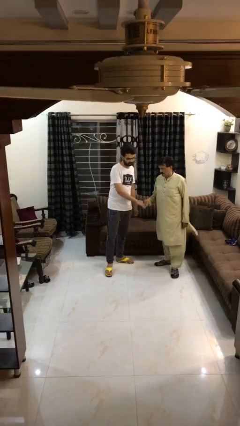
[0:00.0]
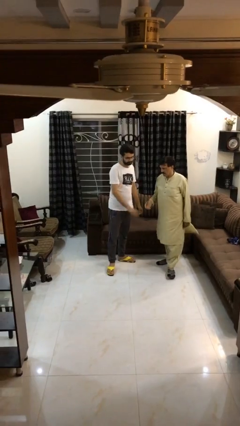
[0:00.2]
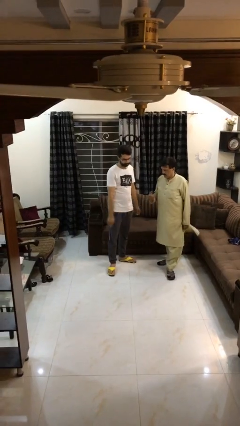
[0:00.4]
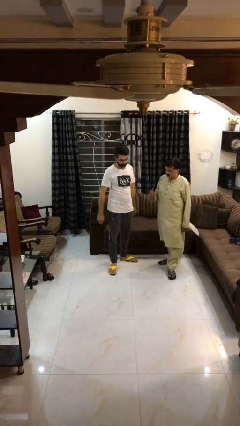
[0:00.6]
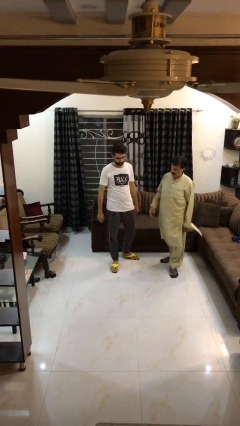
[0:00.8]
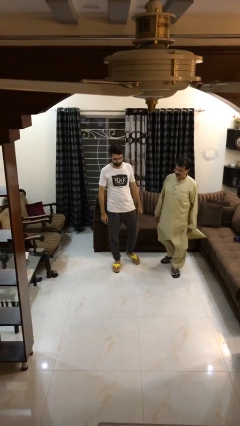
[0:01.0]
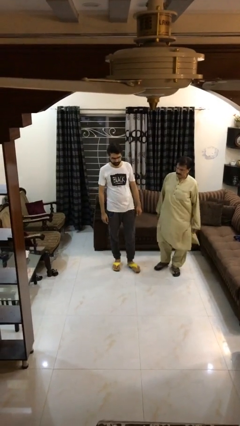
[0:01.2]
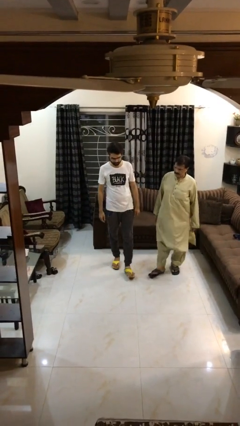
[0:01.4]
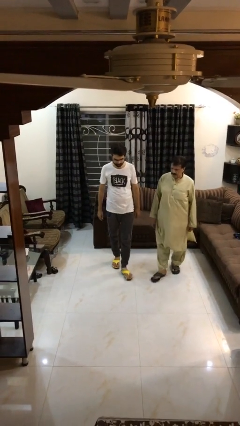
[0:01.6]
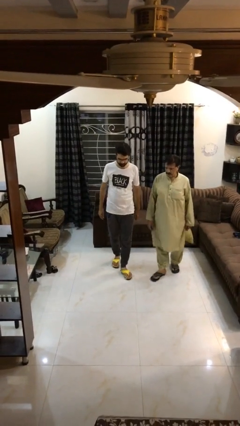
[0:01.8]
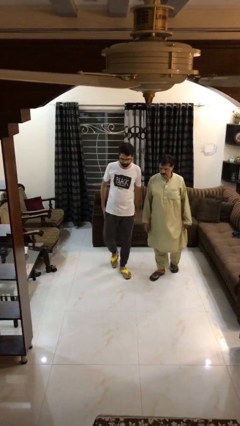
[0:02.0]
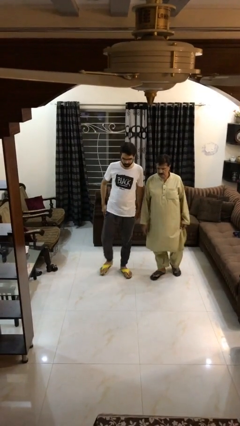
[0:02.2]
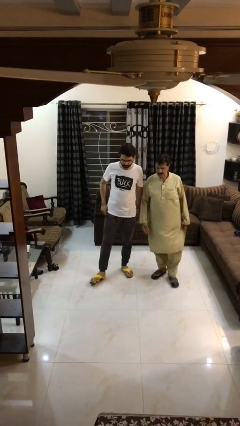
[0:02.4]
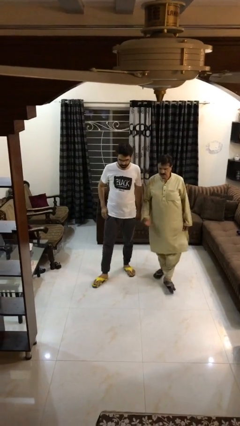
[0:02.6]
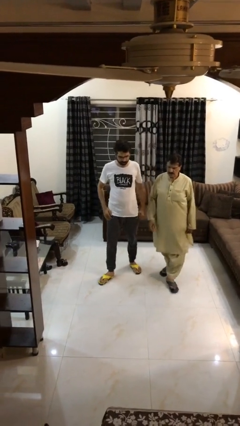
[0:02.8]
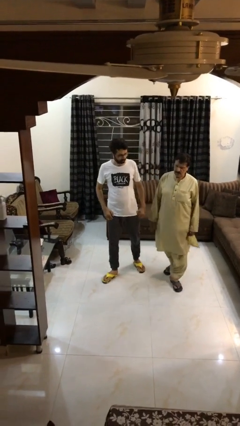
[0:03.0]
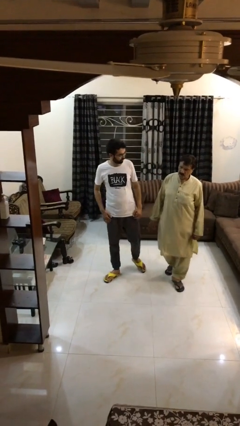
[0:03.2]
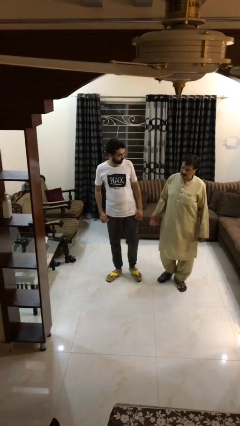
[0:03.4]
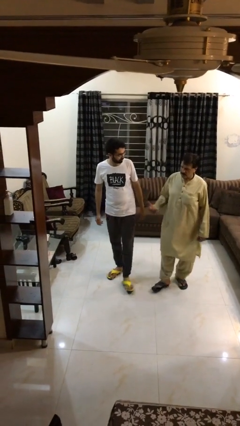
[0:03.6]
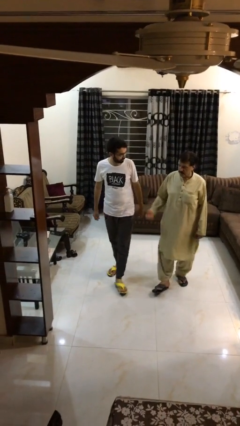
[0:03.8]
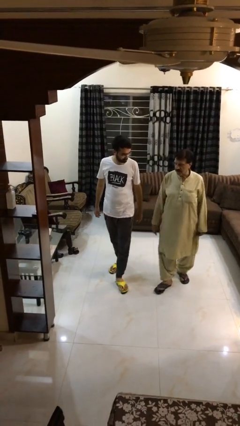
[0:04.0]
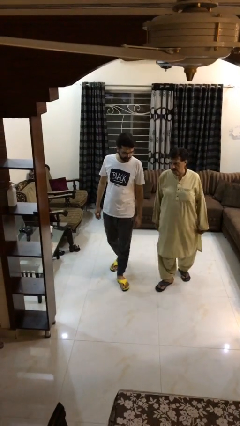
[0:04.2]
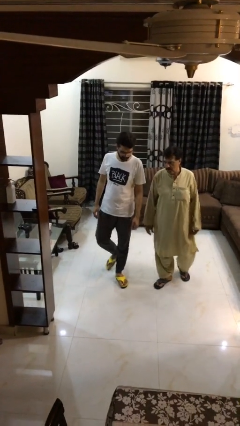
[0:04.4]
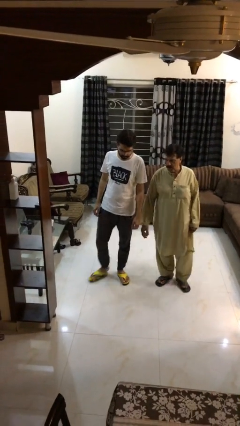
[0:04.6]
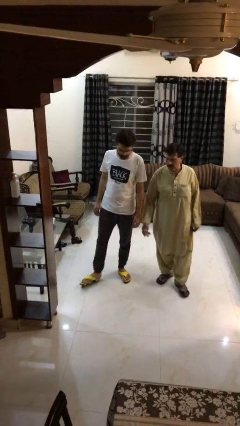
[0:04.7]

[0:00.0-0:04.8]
person talks to person

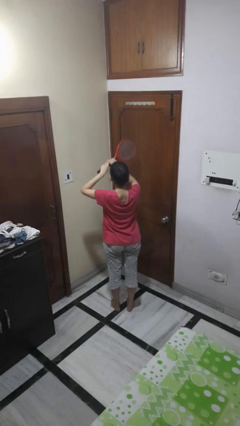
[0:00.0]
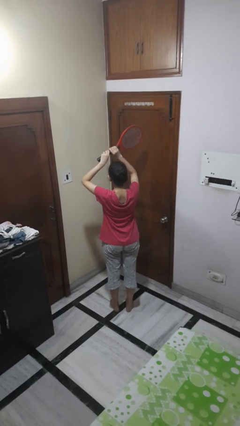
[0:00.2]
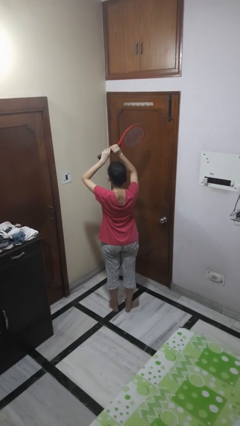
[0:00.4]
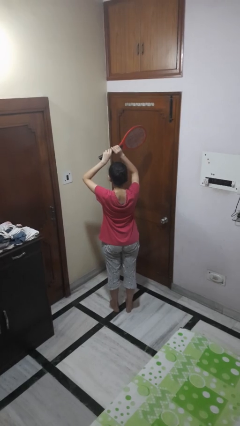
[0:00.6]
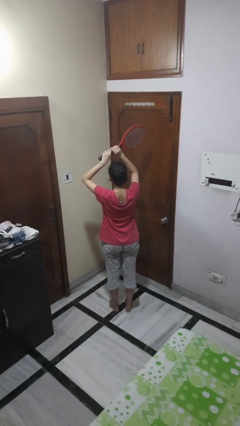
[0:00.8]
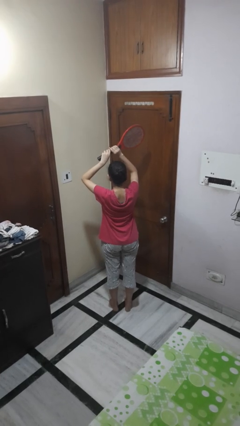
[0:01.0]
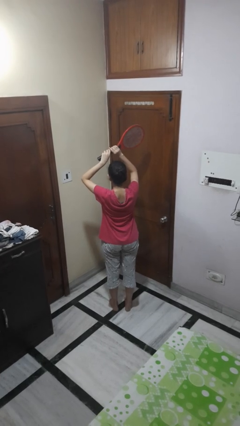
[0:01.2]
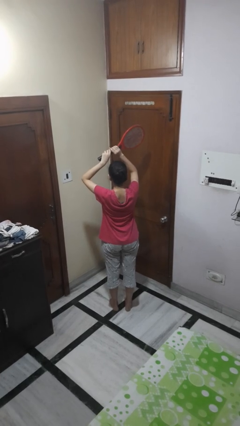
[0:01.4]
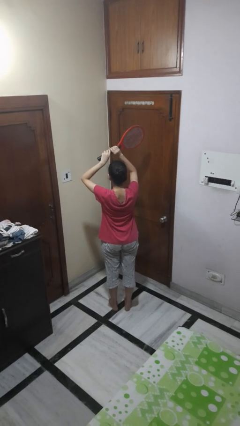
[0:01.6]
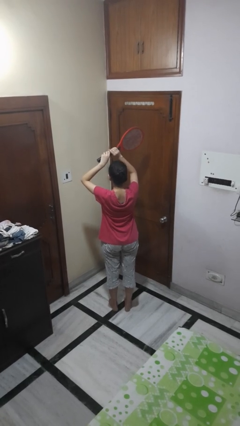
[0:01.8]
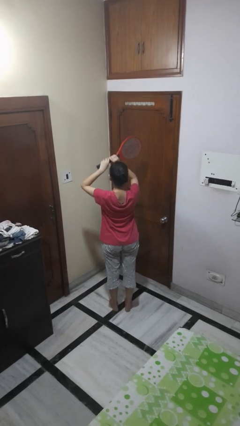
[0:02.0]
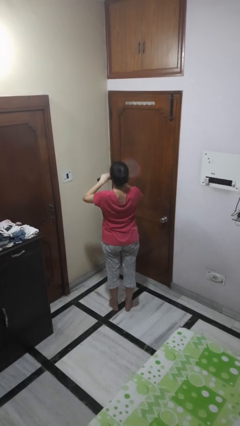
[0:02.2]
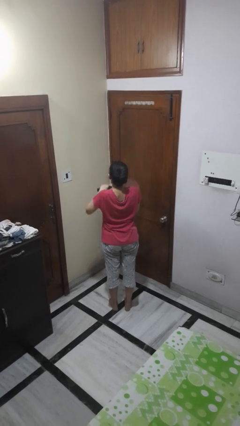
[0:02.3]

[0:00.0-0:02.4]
person holds object above head

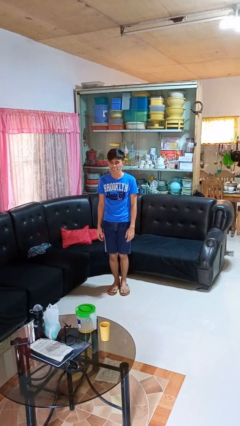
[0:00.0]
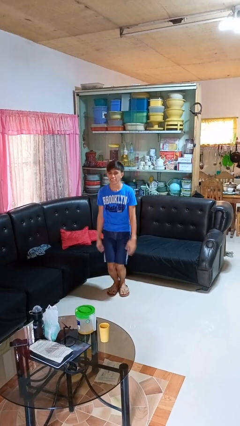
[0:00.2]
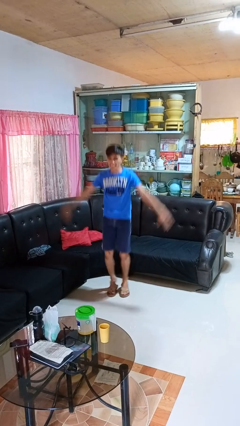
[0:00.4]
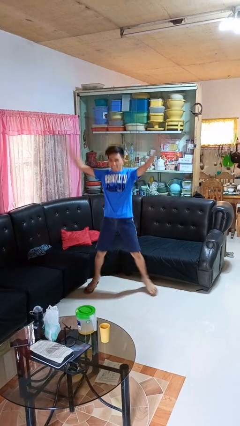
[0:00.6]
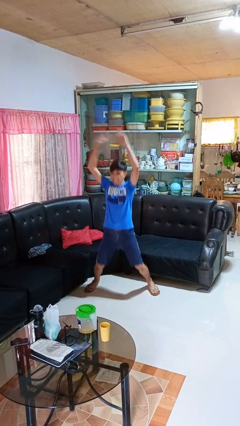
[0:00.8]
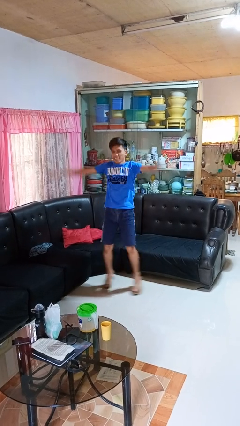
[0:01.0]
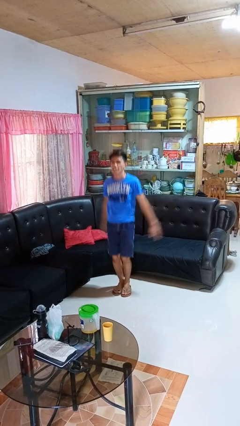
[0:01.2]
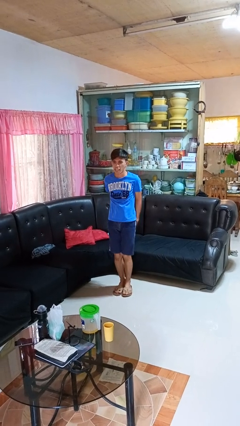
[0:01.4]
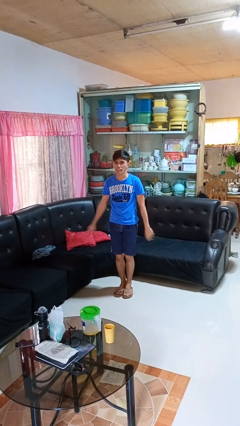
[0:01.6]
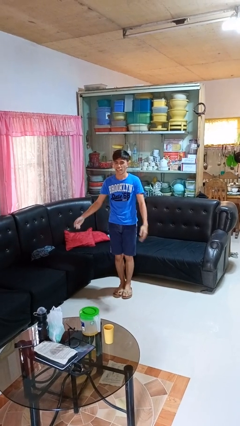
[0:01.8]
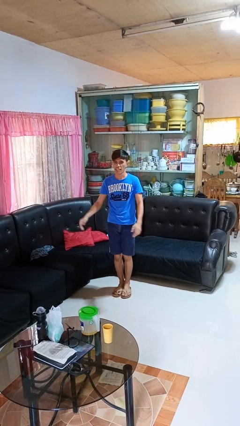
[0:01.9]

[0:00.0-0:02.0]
person exercises with jumping jacks

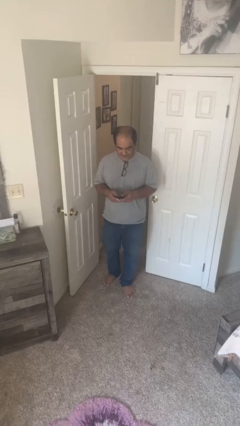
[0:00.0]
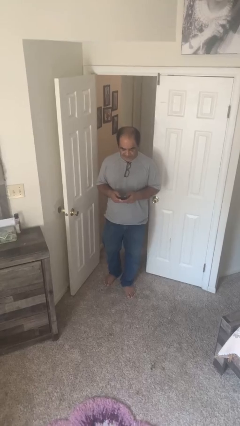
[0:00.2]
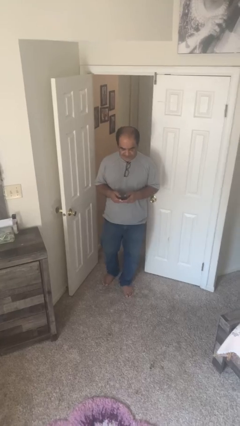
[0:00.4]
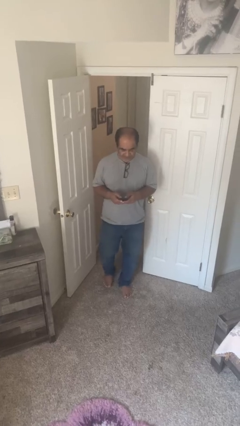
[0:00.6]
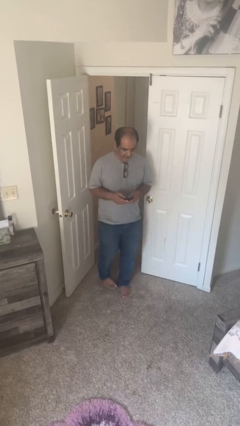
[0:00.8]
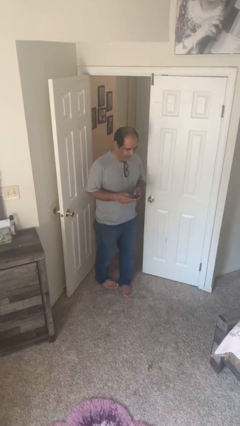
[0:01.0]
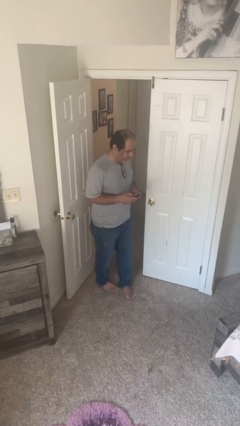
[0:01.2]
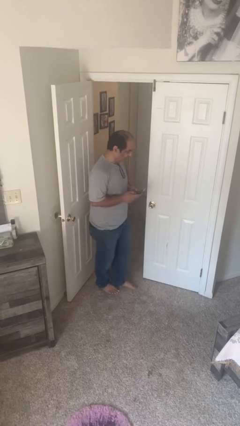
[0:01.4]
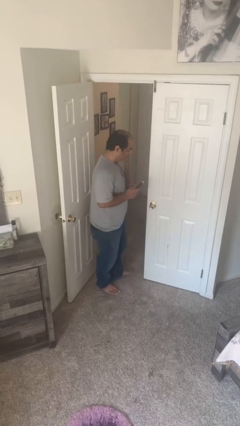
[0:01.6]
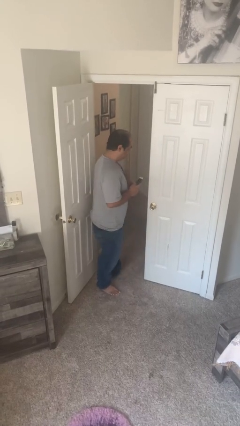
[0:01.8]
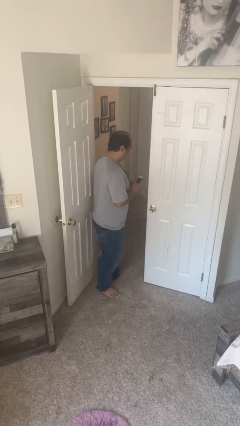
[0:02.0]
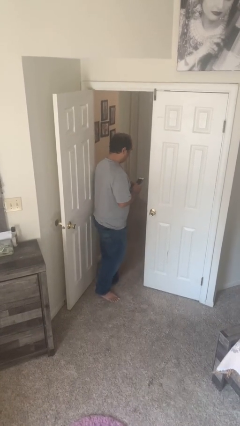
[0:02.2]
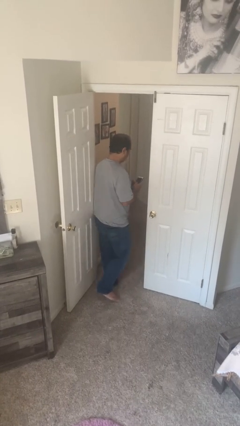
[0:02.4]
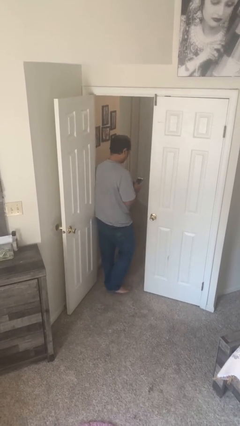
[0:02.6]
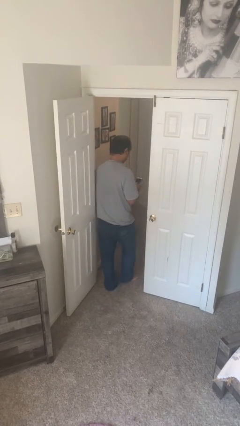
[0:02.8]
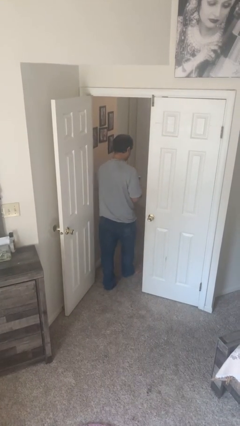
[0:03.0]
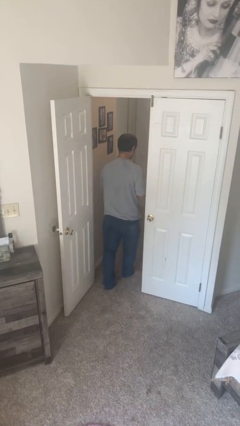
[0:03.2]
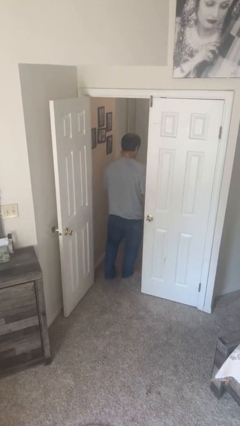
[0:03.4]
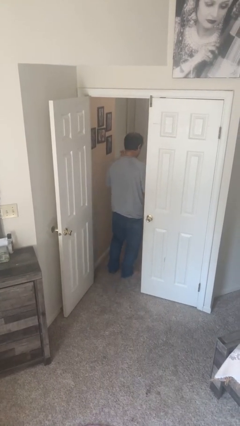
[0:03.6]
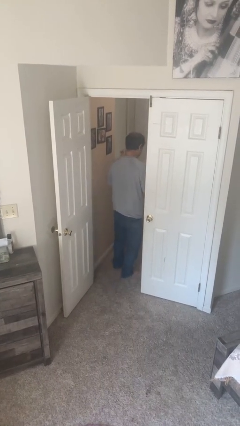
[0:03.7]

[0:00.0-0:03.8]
person exits scene through structure

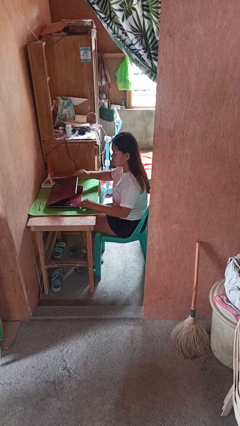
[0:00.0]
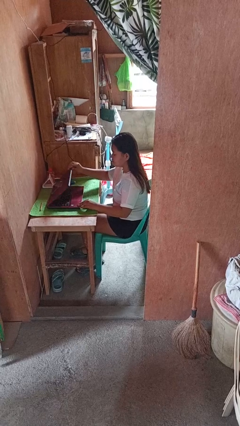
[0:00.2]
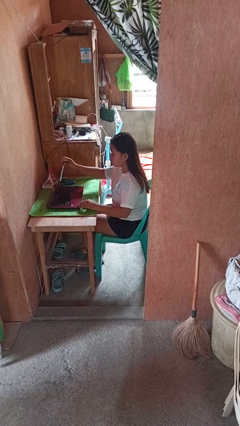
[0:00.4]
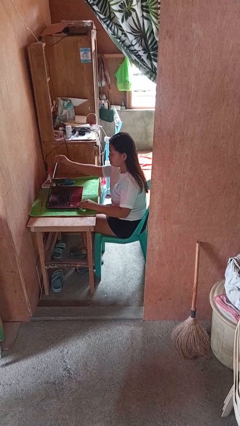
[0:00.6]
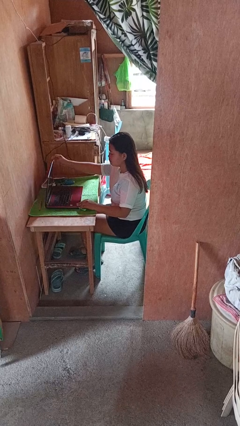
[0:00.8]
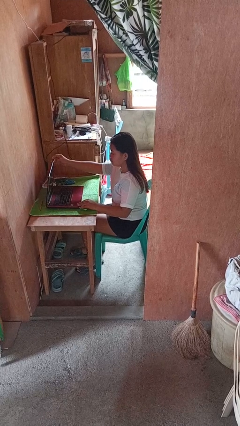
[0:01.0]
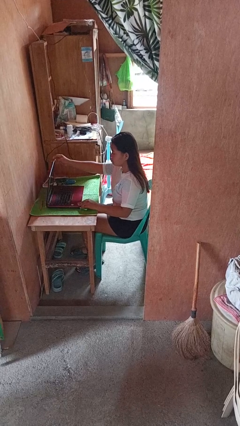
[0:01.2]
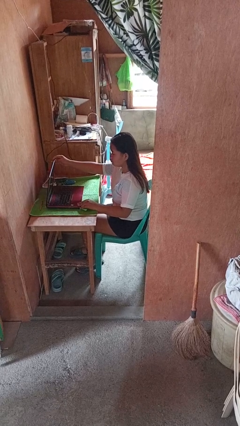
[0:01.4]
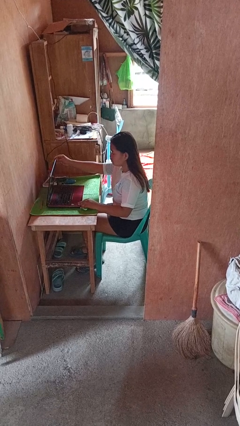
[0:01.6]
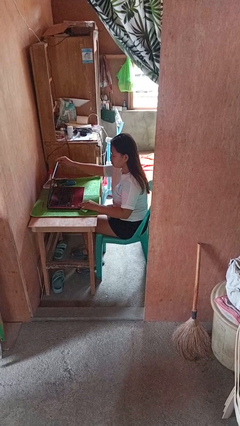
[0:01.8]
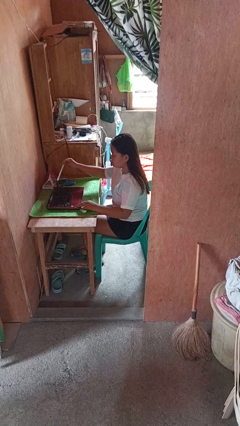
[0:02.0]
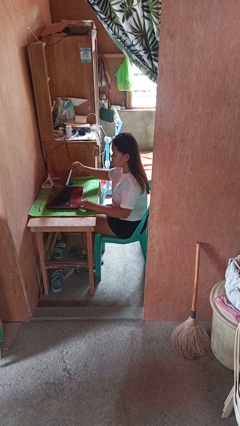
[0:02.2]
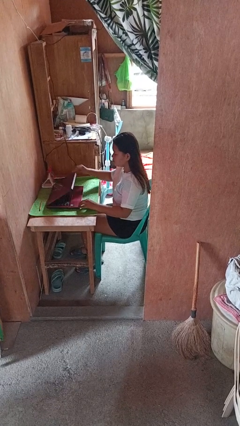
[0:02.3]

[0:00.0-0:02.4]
person opens laptop

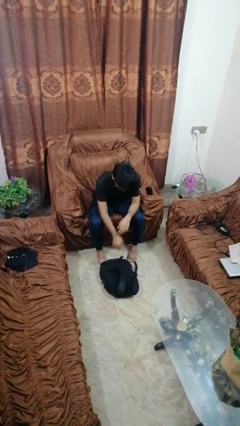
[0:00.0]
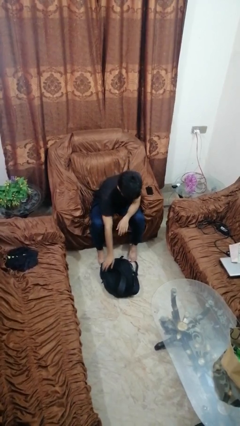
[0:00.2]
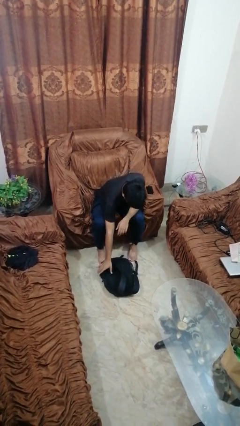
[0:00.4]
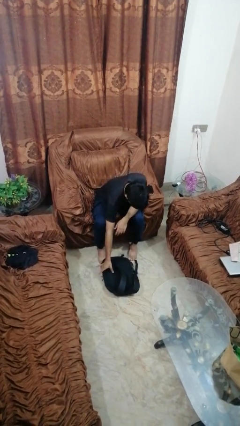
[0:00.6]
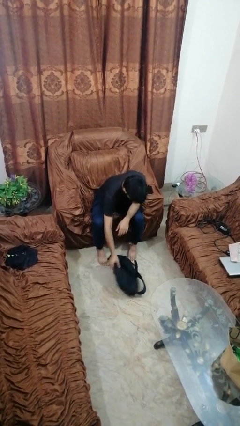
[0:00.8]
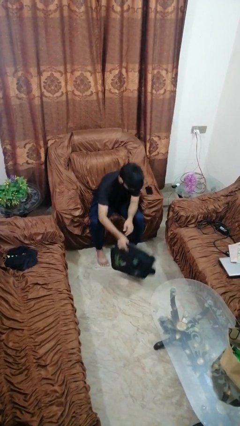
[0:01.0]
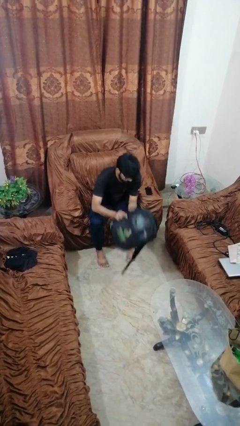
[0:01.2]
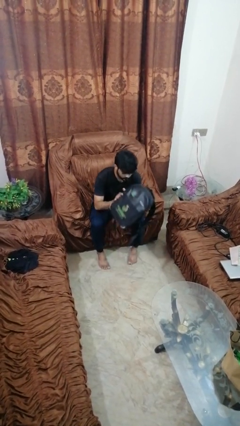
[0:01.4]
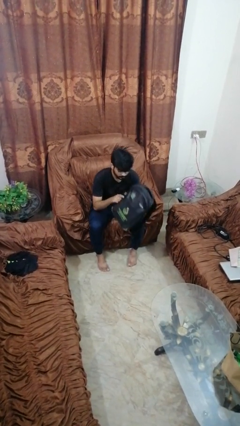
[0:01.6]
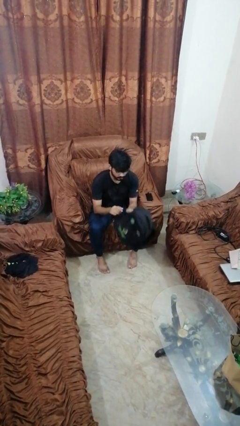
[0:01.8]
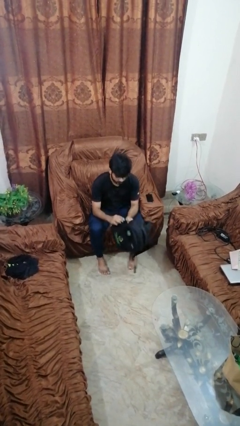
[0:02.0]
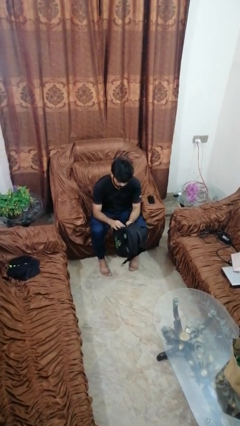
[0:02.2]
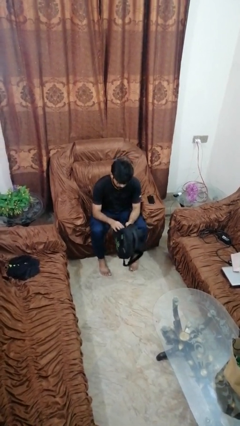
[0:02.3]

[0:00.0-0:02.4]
person picks up object from floor
